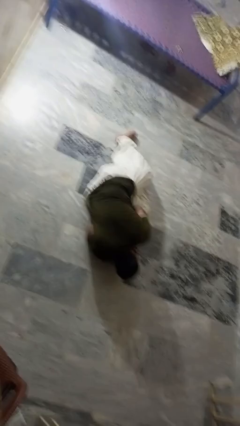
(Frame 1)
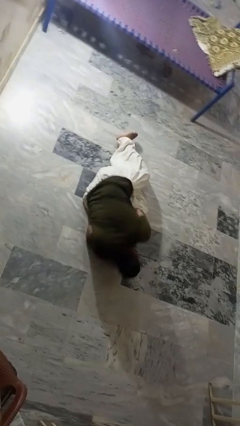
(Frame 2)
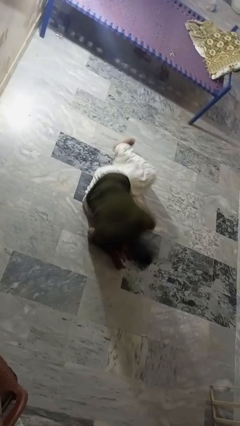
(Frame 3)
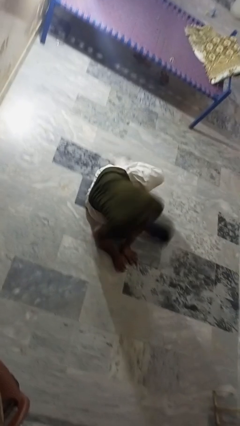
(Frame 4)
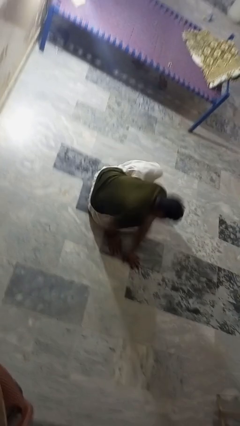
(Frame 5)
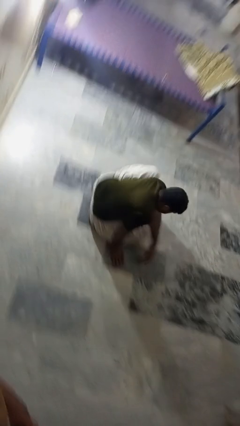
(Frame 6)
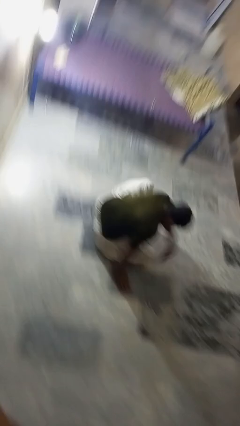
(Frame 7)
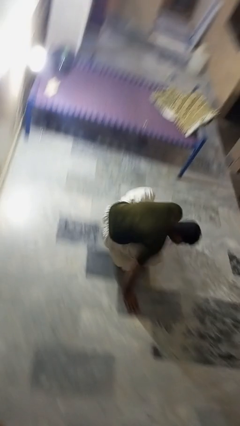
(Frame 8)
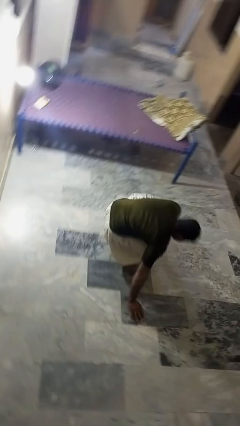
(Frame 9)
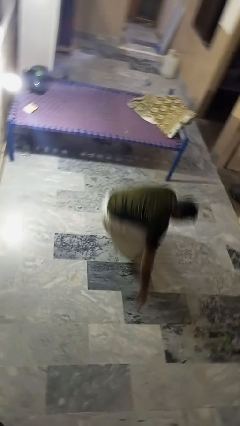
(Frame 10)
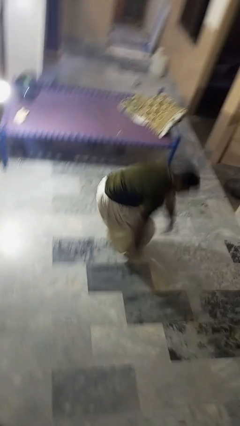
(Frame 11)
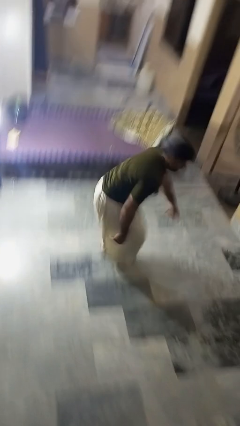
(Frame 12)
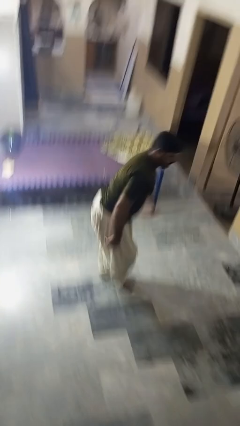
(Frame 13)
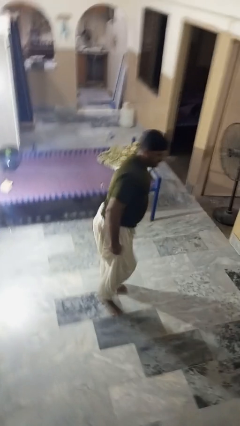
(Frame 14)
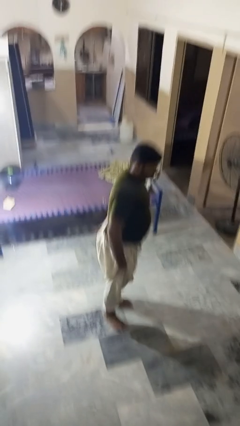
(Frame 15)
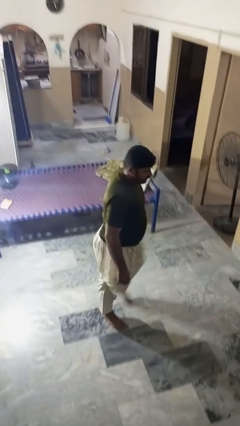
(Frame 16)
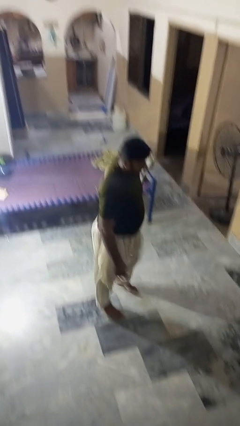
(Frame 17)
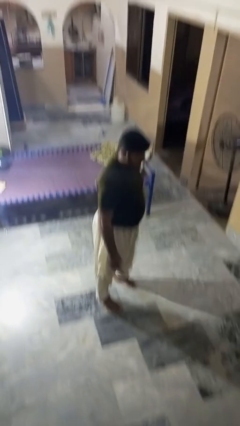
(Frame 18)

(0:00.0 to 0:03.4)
person stands up from floor

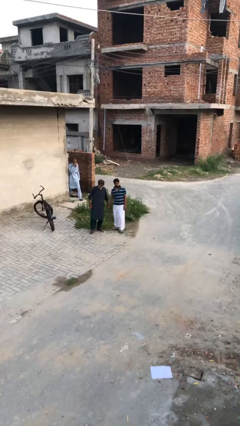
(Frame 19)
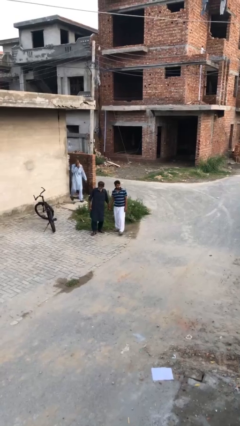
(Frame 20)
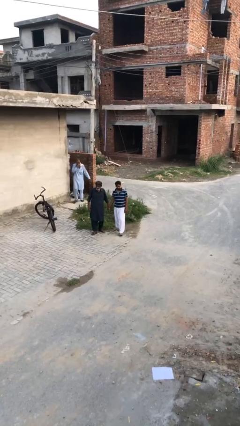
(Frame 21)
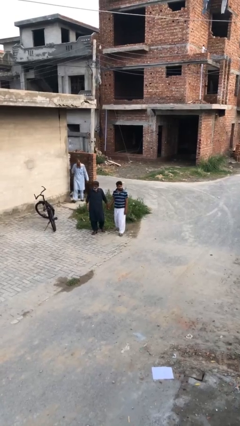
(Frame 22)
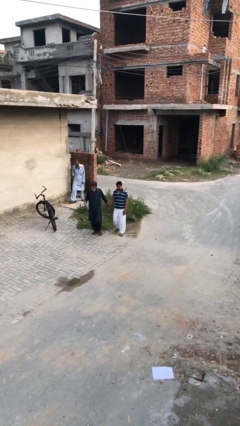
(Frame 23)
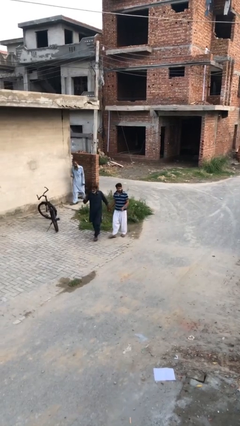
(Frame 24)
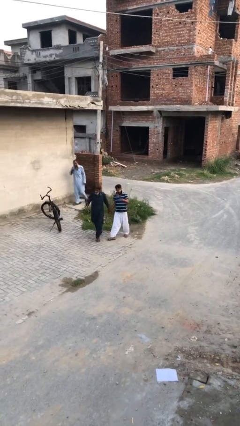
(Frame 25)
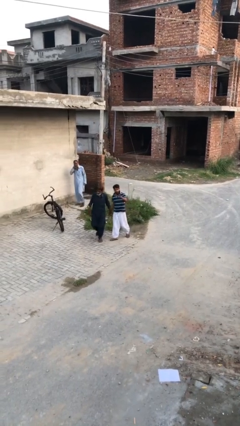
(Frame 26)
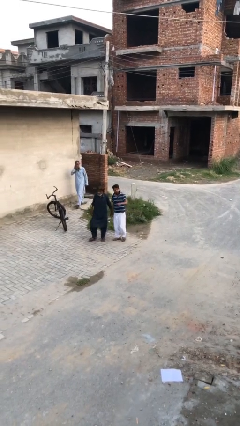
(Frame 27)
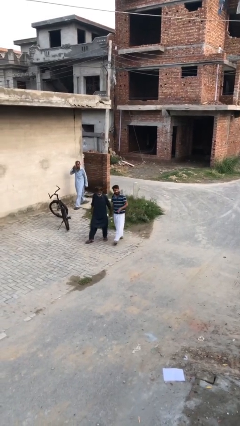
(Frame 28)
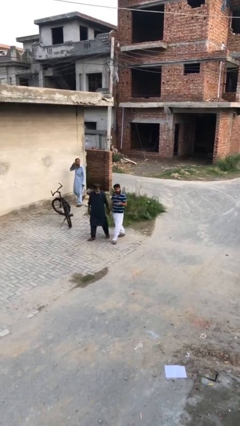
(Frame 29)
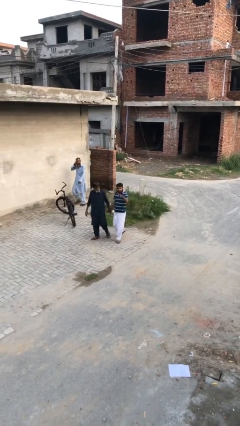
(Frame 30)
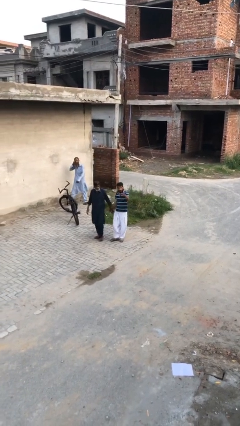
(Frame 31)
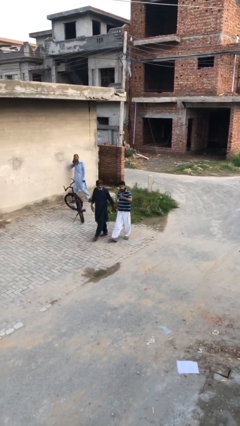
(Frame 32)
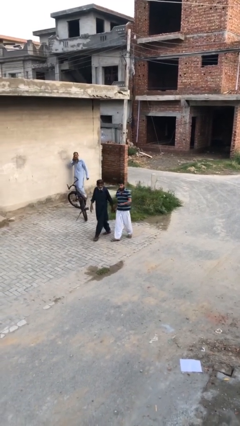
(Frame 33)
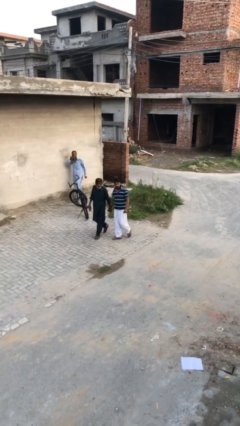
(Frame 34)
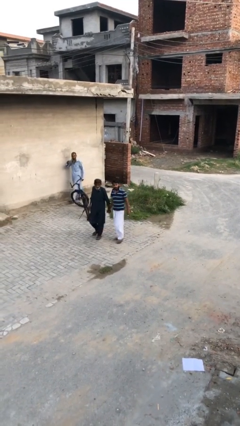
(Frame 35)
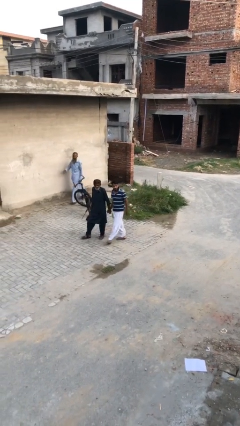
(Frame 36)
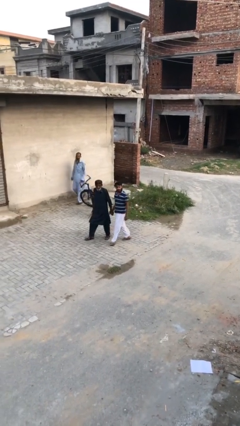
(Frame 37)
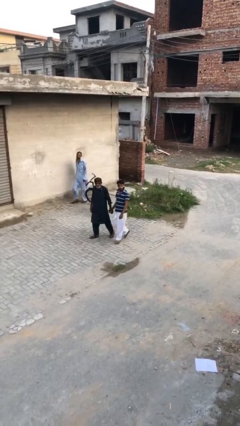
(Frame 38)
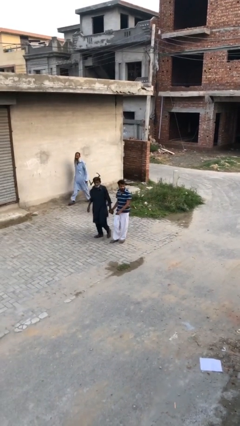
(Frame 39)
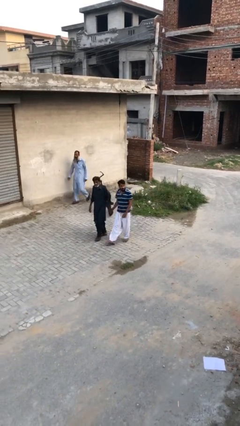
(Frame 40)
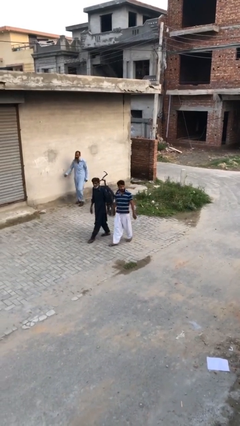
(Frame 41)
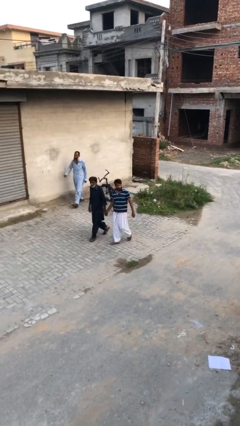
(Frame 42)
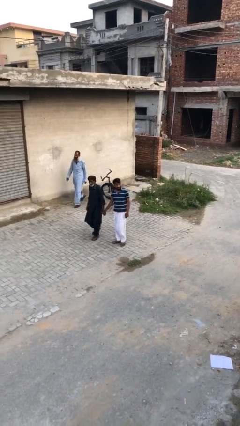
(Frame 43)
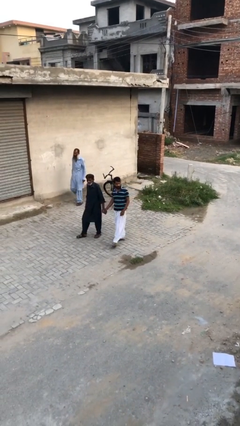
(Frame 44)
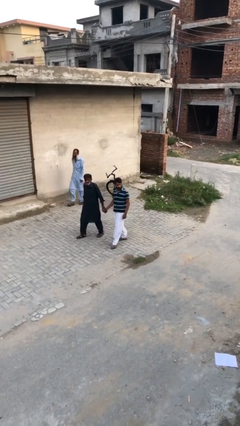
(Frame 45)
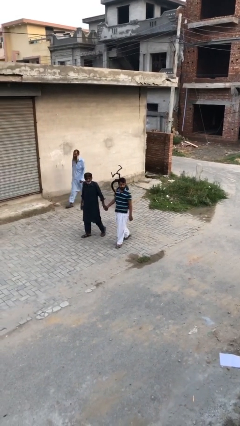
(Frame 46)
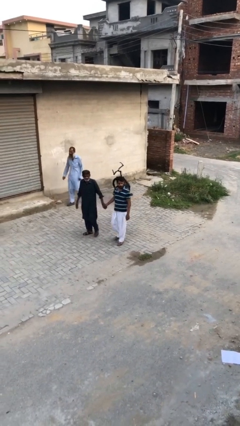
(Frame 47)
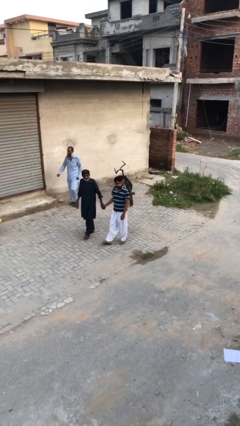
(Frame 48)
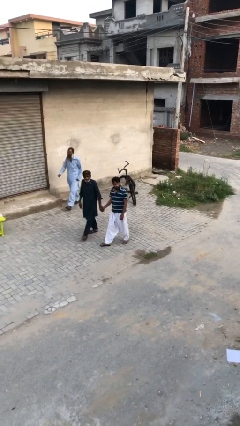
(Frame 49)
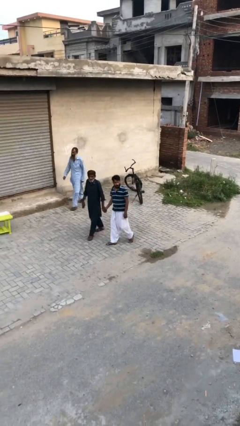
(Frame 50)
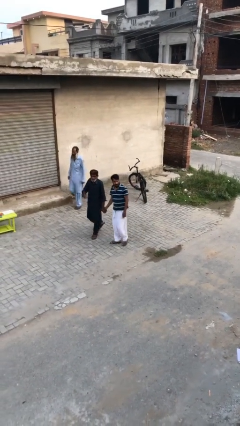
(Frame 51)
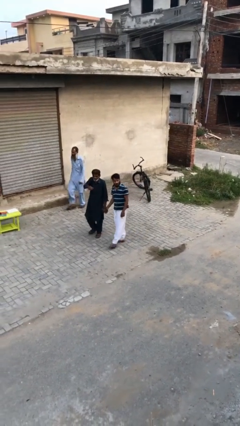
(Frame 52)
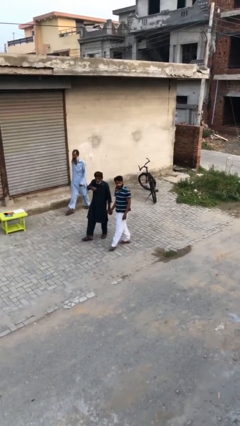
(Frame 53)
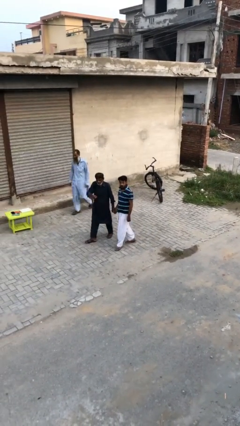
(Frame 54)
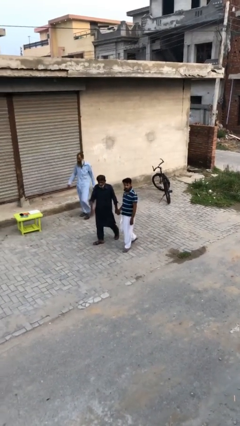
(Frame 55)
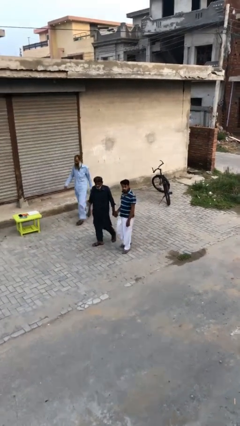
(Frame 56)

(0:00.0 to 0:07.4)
person holds hand

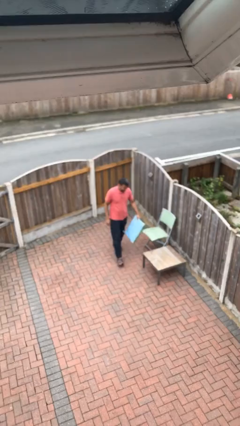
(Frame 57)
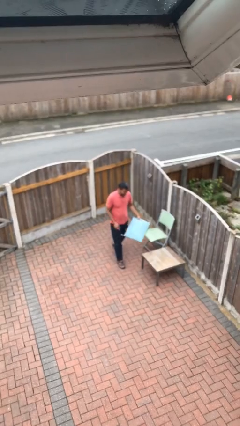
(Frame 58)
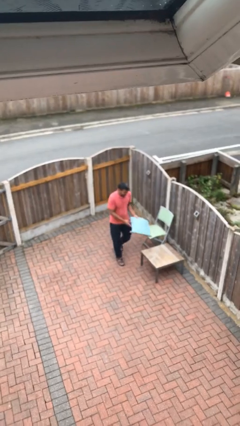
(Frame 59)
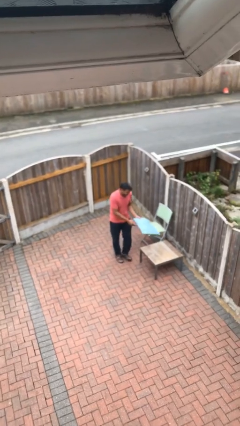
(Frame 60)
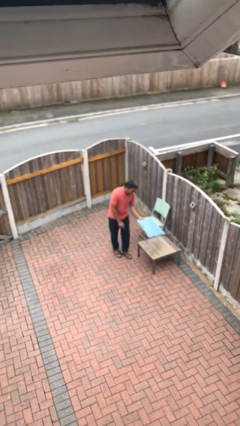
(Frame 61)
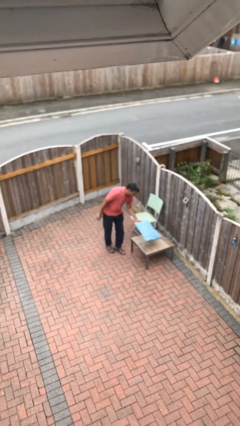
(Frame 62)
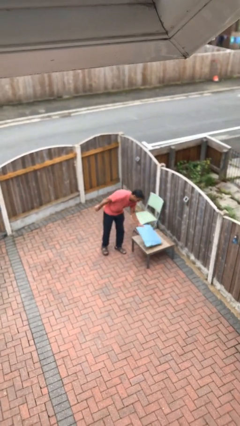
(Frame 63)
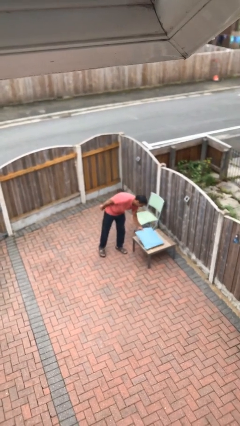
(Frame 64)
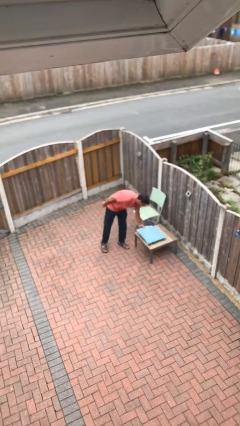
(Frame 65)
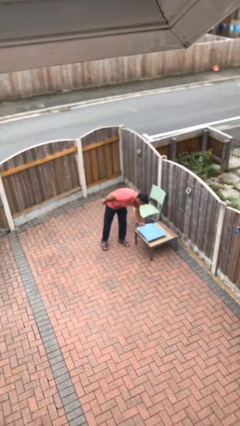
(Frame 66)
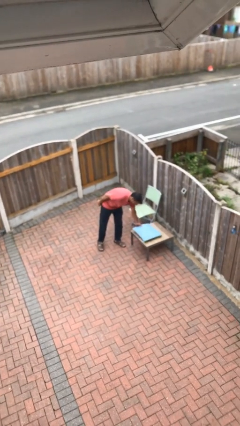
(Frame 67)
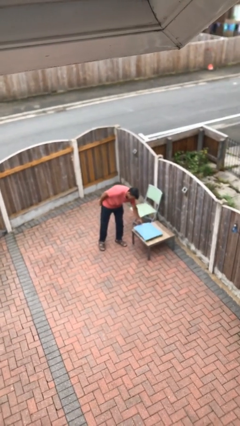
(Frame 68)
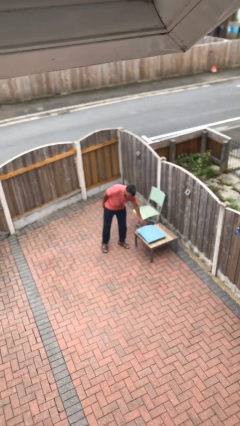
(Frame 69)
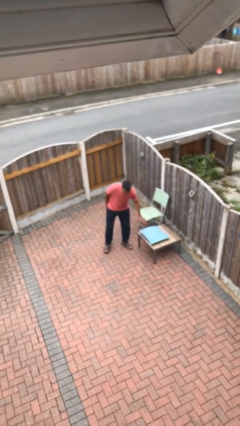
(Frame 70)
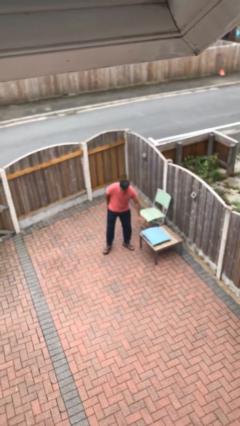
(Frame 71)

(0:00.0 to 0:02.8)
person puts down object on table

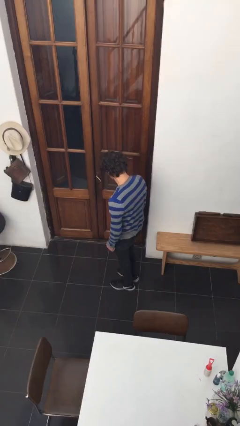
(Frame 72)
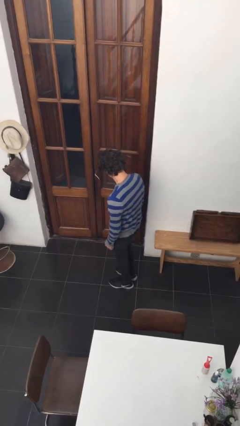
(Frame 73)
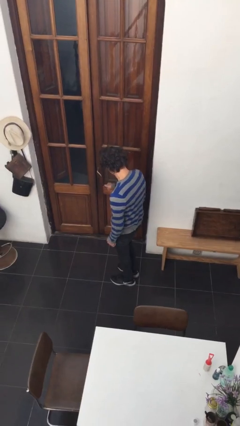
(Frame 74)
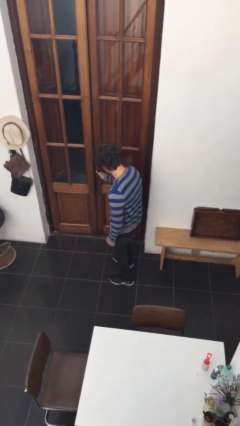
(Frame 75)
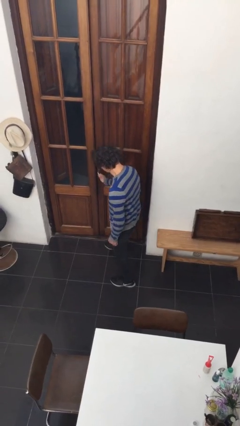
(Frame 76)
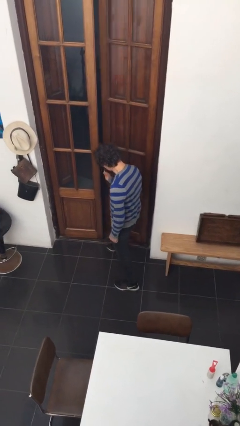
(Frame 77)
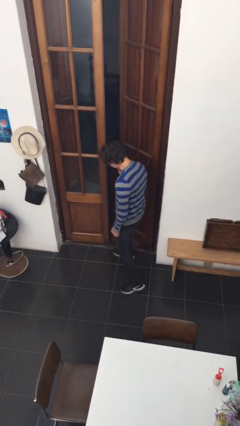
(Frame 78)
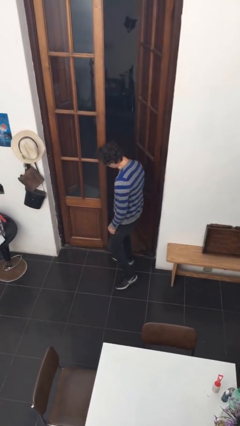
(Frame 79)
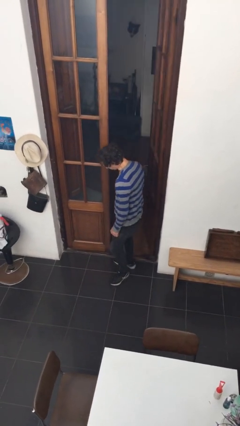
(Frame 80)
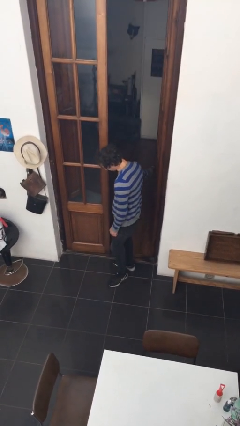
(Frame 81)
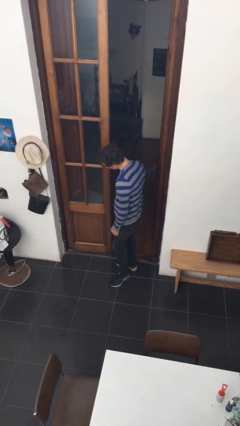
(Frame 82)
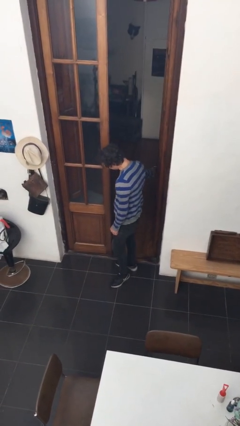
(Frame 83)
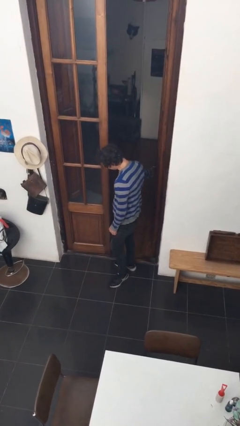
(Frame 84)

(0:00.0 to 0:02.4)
person opens facility door

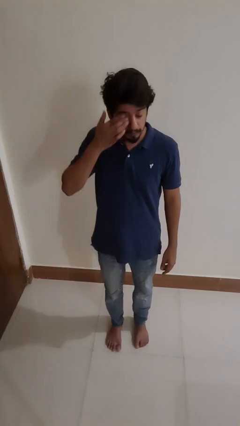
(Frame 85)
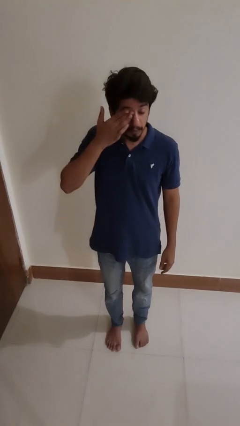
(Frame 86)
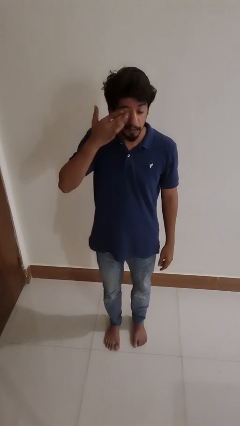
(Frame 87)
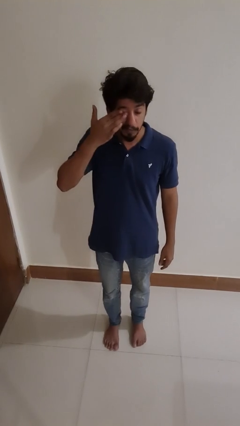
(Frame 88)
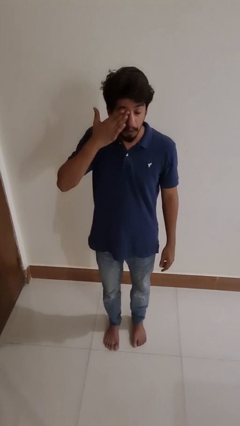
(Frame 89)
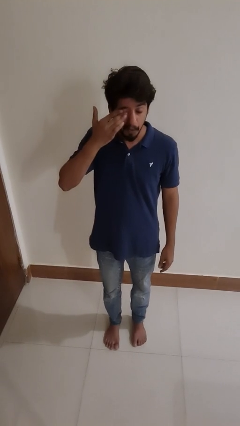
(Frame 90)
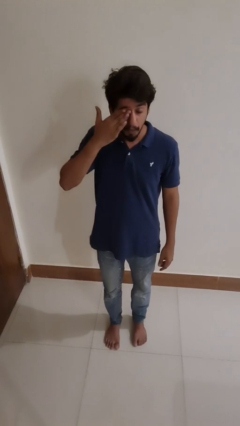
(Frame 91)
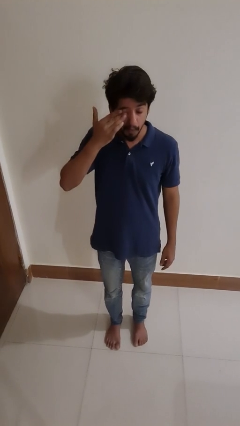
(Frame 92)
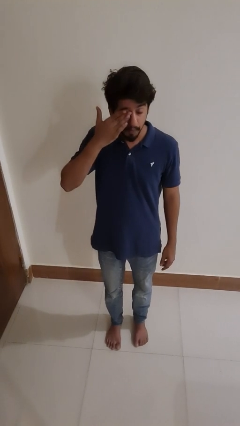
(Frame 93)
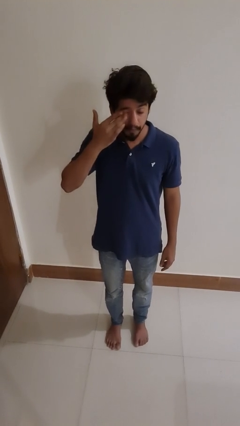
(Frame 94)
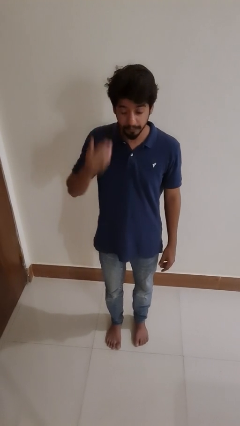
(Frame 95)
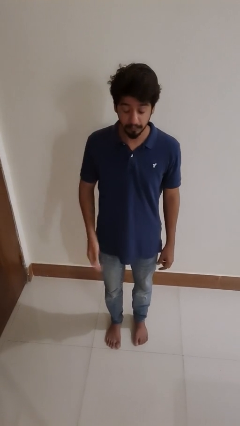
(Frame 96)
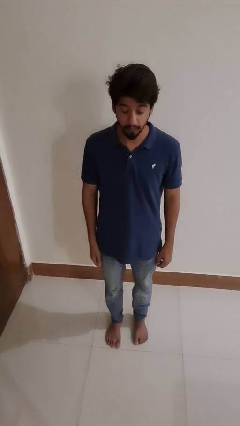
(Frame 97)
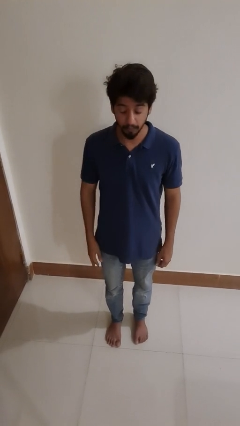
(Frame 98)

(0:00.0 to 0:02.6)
person rubs eyes
